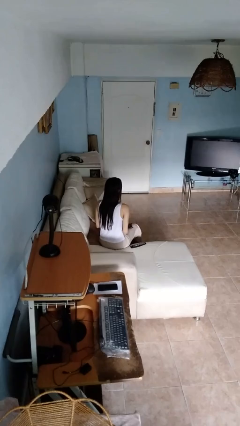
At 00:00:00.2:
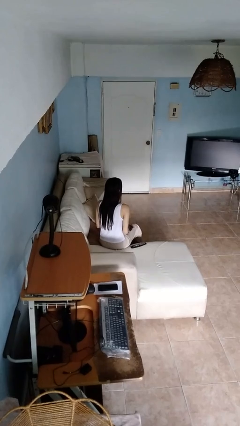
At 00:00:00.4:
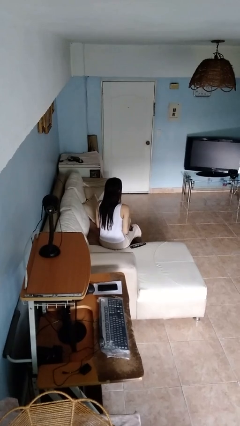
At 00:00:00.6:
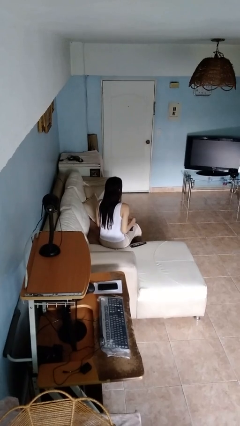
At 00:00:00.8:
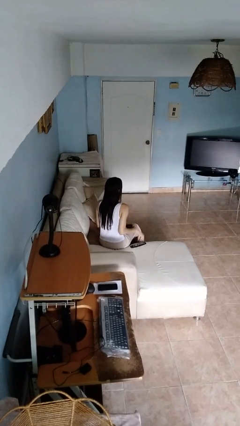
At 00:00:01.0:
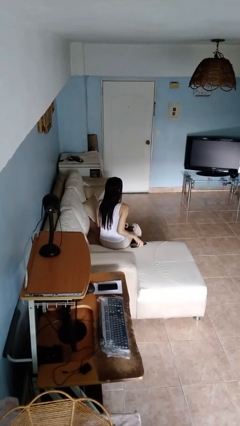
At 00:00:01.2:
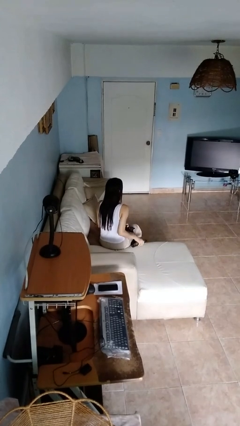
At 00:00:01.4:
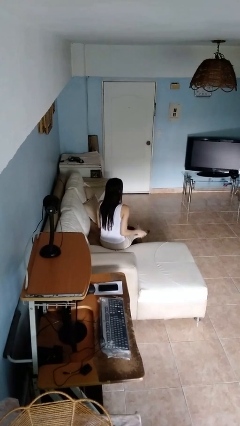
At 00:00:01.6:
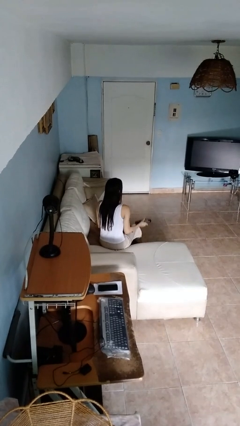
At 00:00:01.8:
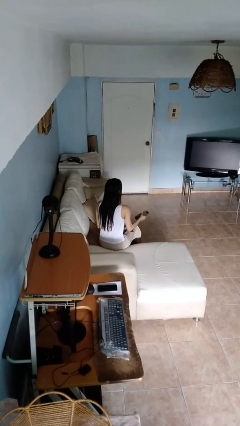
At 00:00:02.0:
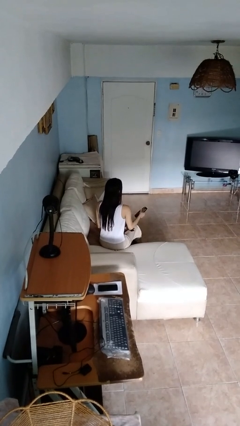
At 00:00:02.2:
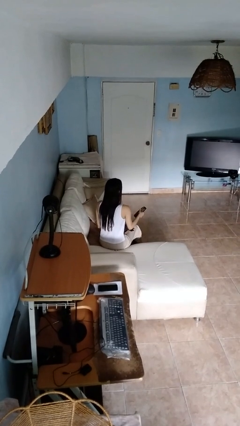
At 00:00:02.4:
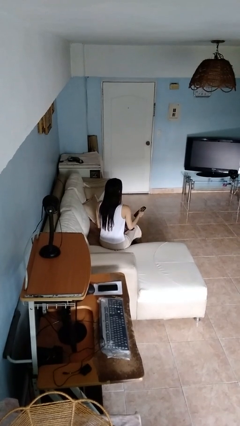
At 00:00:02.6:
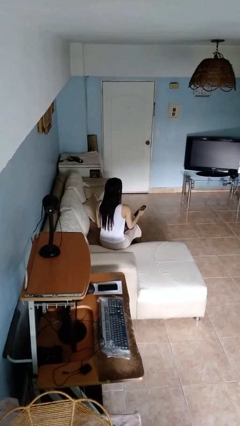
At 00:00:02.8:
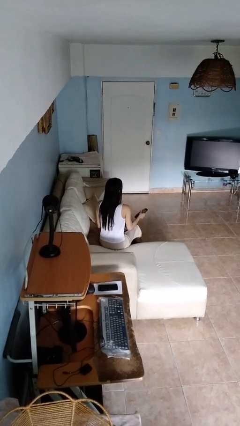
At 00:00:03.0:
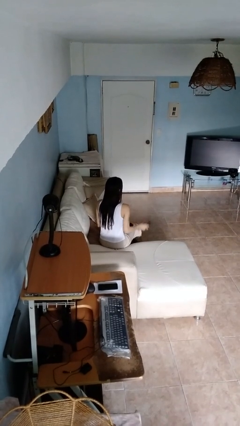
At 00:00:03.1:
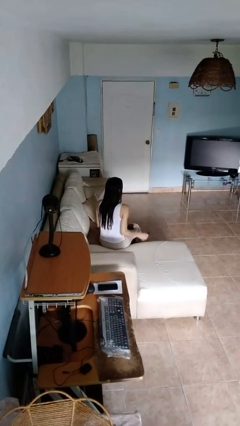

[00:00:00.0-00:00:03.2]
person uses television remote

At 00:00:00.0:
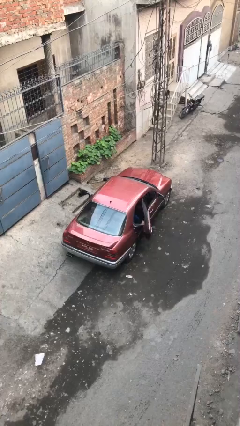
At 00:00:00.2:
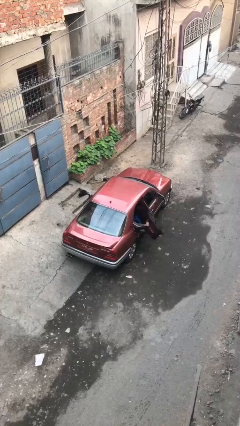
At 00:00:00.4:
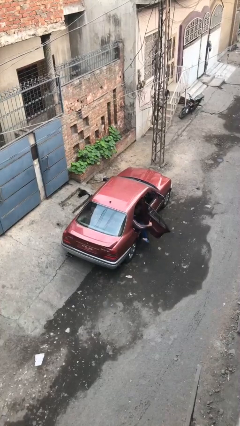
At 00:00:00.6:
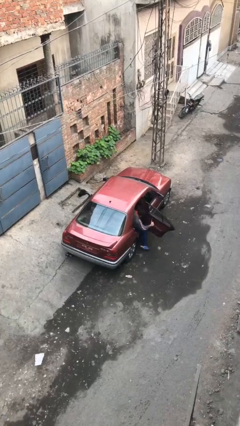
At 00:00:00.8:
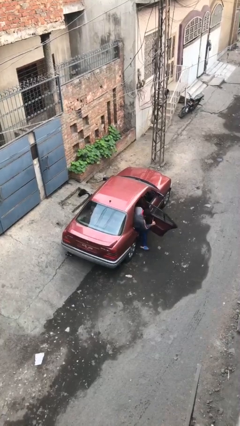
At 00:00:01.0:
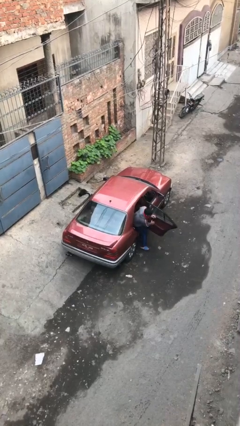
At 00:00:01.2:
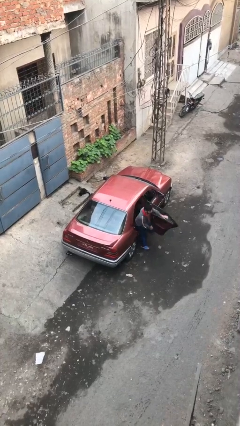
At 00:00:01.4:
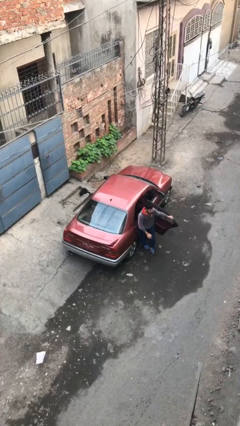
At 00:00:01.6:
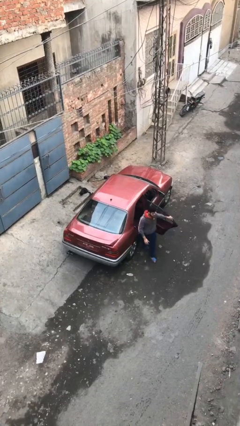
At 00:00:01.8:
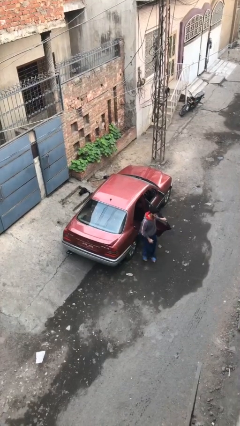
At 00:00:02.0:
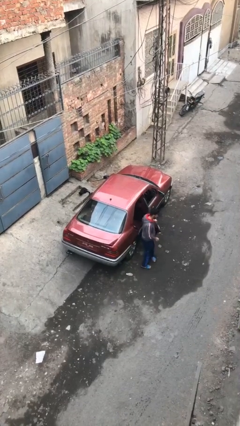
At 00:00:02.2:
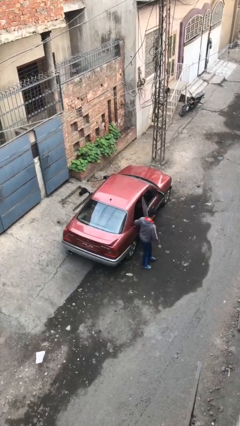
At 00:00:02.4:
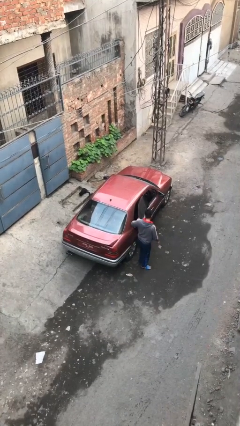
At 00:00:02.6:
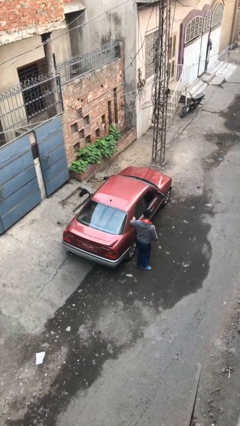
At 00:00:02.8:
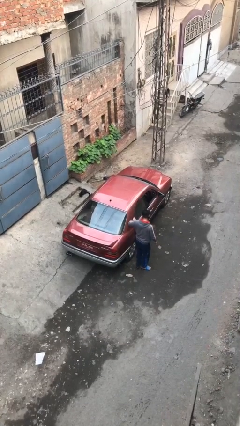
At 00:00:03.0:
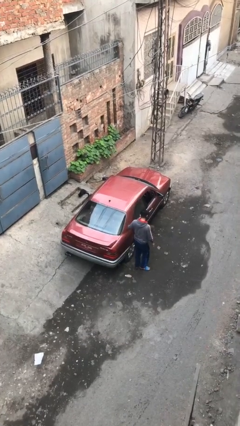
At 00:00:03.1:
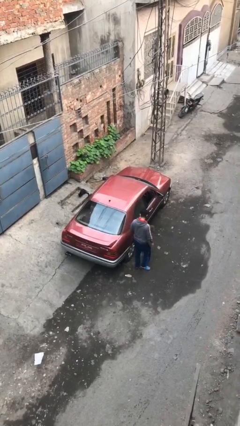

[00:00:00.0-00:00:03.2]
car drops off person

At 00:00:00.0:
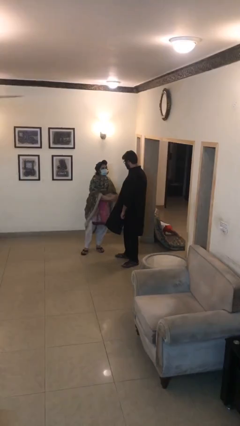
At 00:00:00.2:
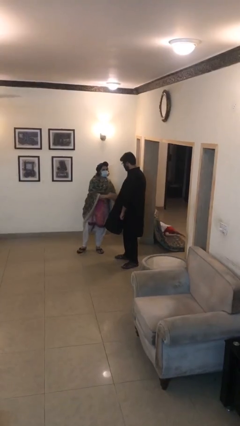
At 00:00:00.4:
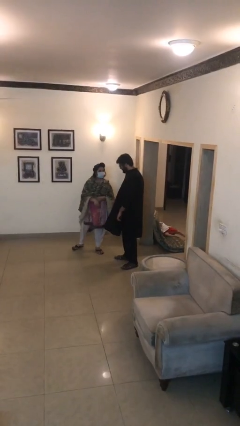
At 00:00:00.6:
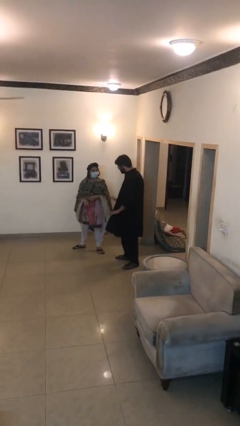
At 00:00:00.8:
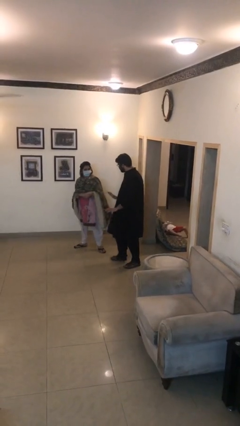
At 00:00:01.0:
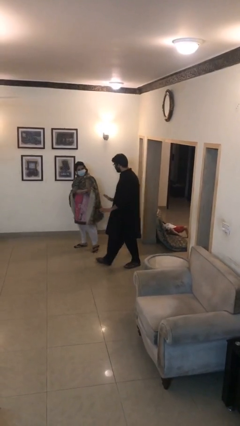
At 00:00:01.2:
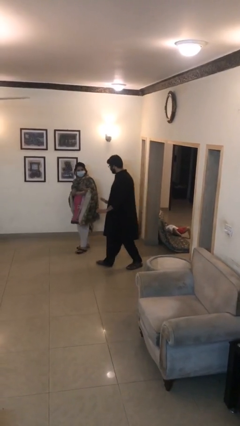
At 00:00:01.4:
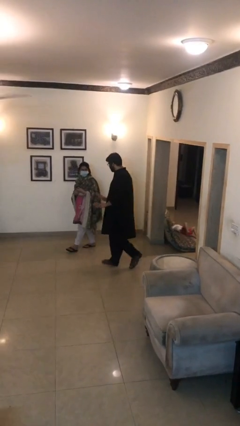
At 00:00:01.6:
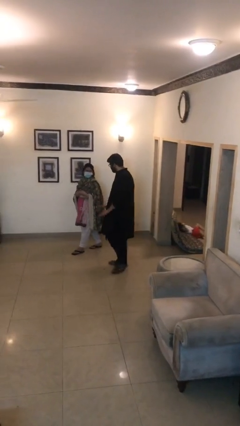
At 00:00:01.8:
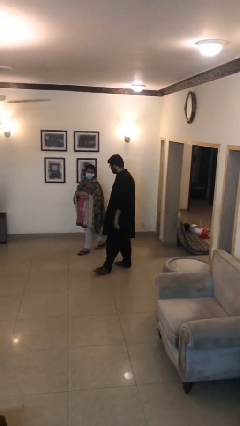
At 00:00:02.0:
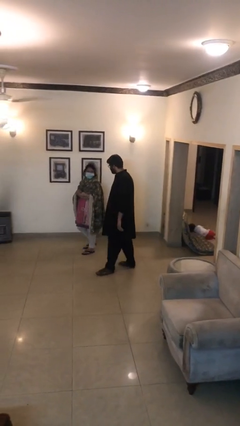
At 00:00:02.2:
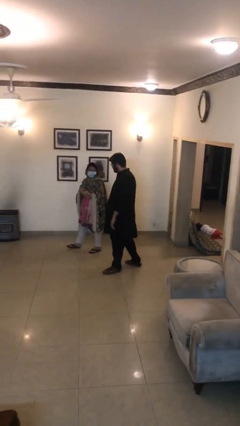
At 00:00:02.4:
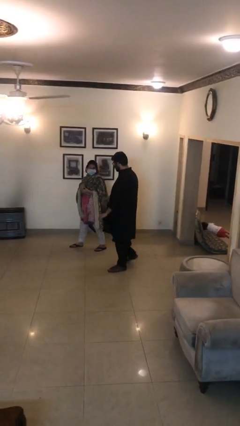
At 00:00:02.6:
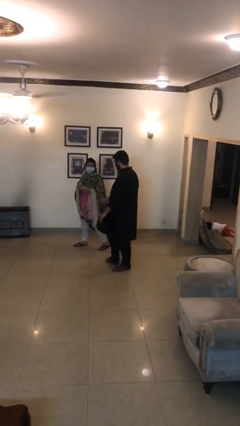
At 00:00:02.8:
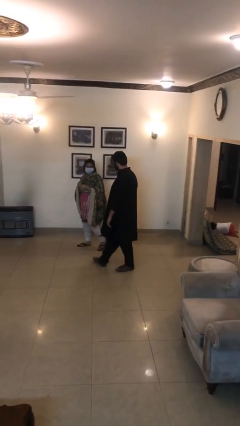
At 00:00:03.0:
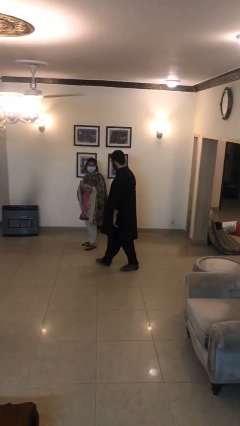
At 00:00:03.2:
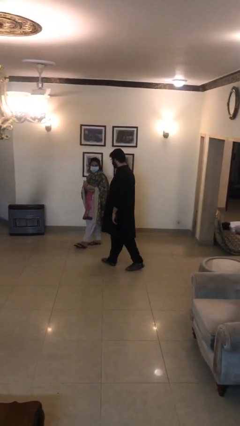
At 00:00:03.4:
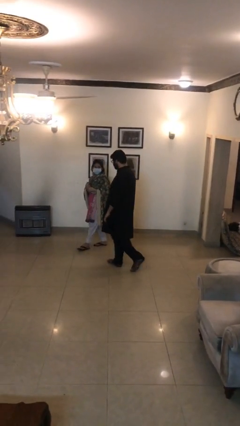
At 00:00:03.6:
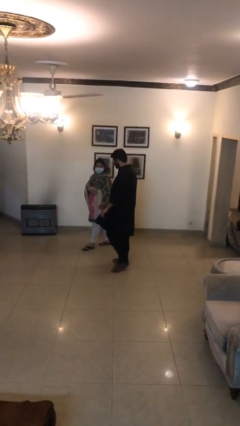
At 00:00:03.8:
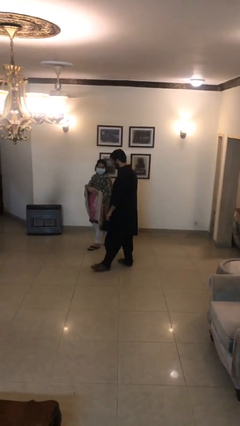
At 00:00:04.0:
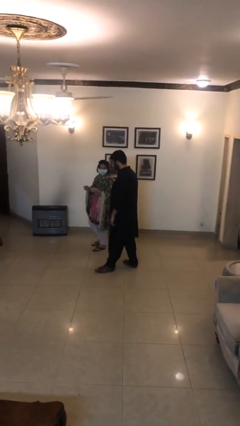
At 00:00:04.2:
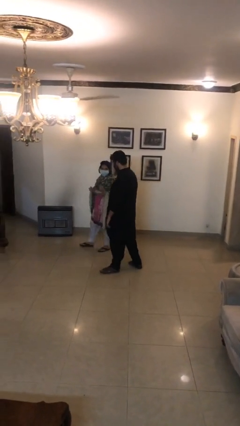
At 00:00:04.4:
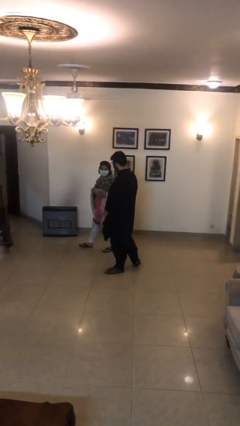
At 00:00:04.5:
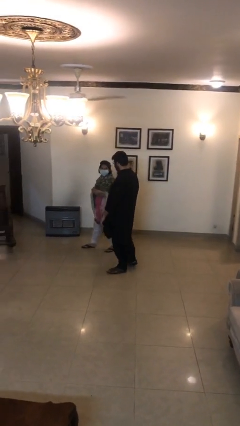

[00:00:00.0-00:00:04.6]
person talks to person

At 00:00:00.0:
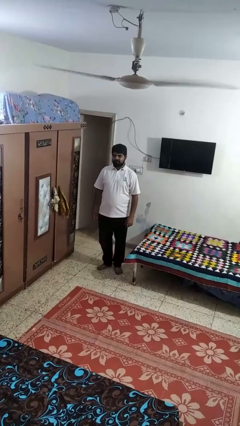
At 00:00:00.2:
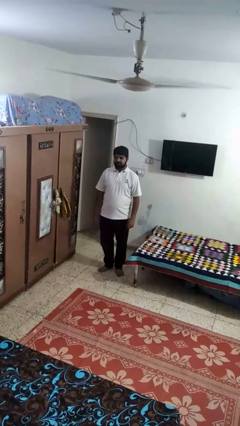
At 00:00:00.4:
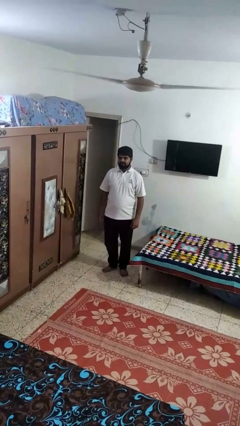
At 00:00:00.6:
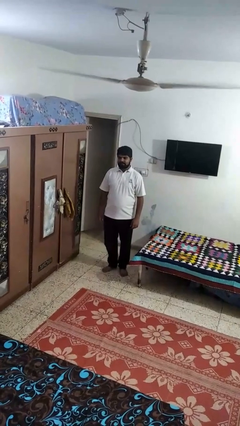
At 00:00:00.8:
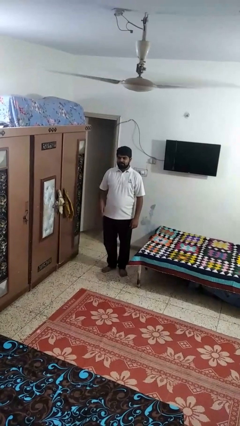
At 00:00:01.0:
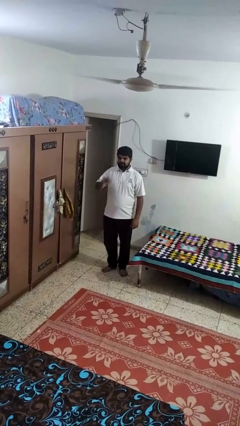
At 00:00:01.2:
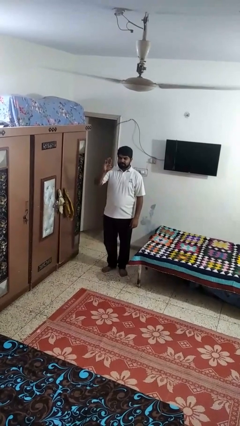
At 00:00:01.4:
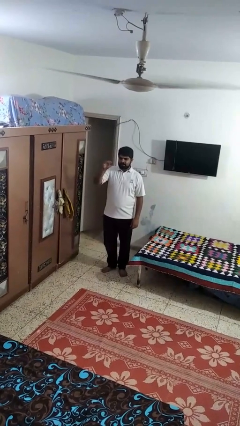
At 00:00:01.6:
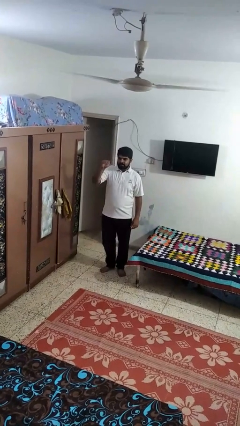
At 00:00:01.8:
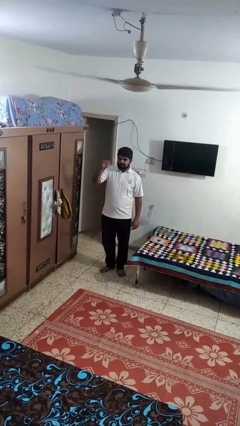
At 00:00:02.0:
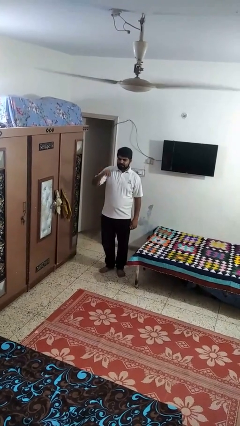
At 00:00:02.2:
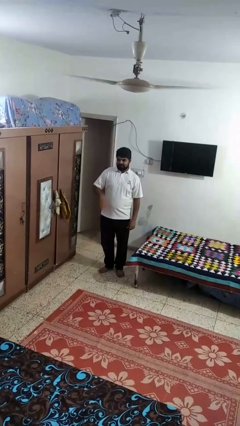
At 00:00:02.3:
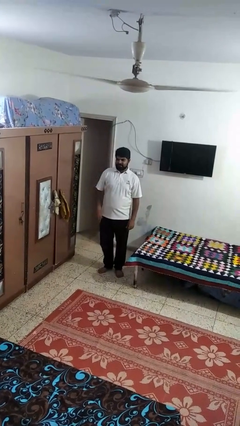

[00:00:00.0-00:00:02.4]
person gestures come here

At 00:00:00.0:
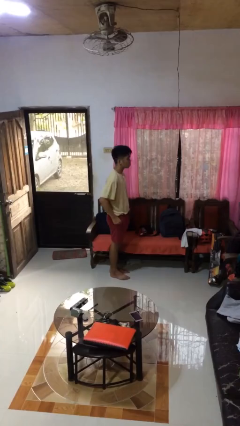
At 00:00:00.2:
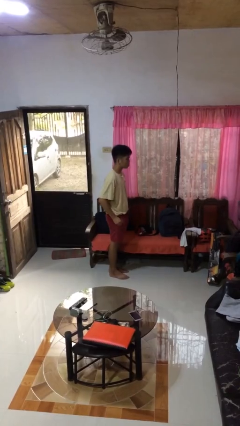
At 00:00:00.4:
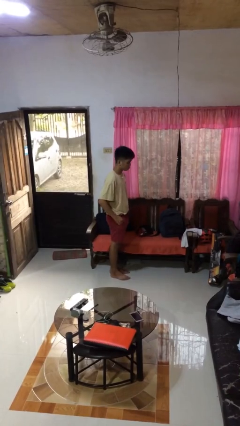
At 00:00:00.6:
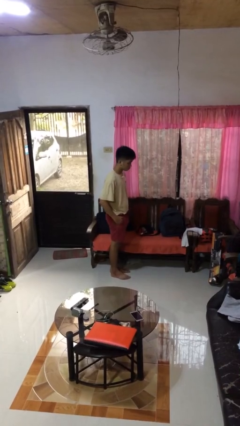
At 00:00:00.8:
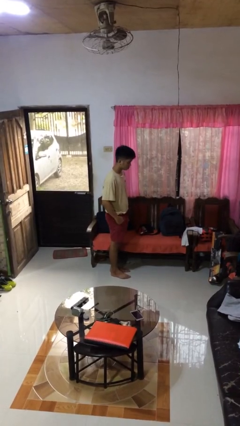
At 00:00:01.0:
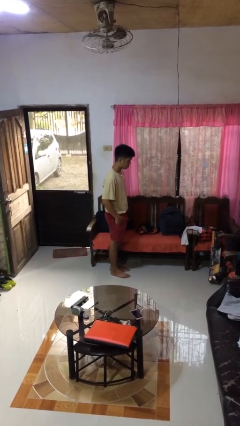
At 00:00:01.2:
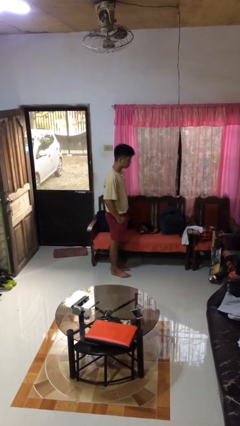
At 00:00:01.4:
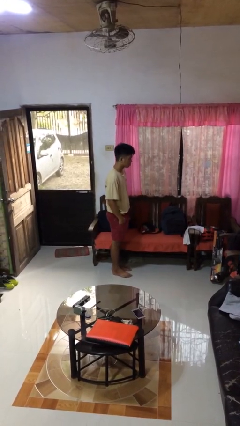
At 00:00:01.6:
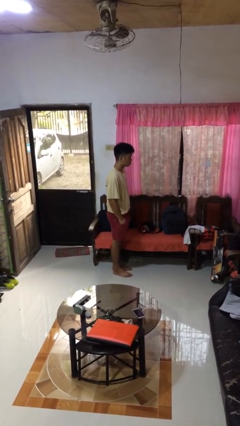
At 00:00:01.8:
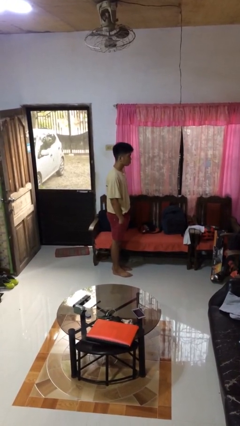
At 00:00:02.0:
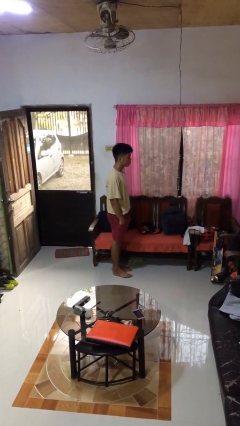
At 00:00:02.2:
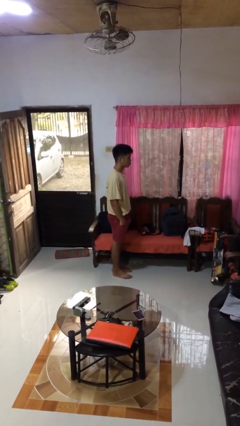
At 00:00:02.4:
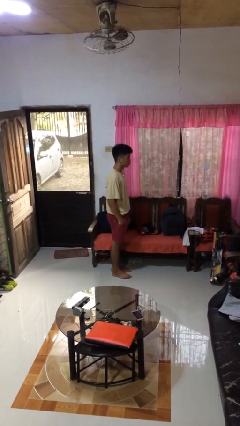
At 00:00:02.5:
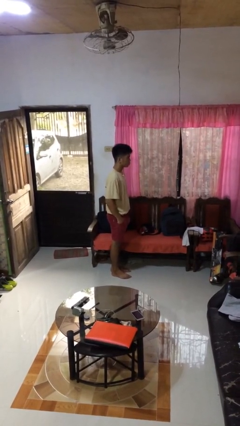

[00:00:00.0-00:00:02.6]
person puts hands in back pockets

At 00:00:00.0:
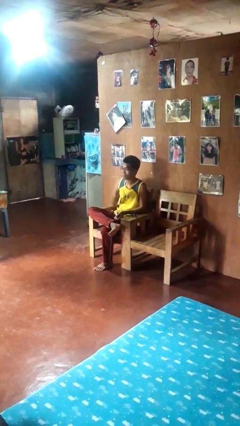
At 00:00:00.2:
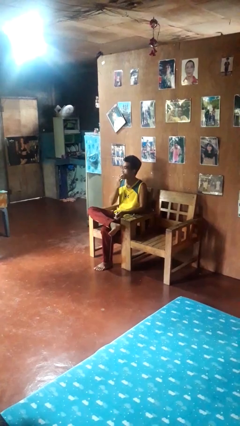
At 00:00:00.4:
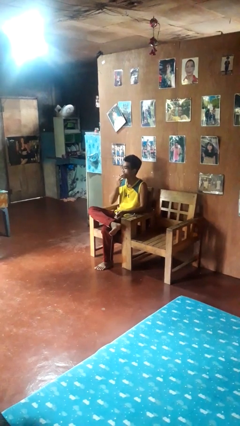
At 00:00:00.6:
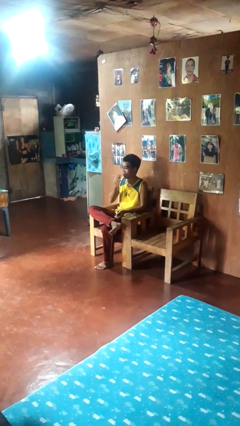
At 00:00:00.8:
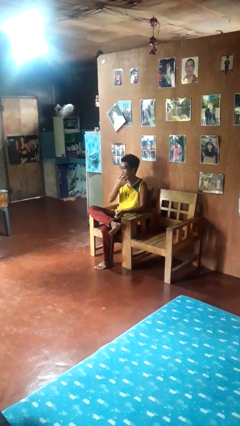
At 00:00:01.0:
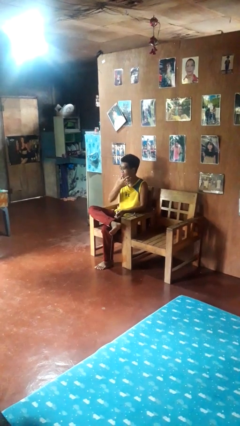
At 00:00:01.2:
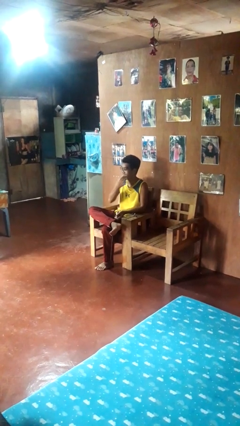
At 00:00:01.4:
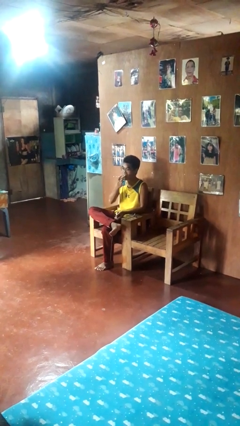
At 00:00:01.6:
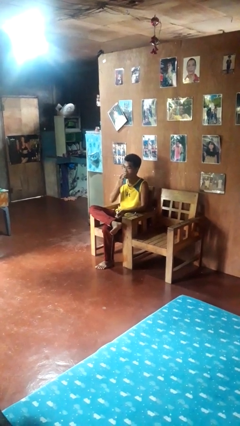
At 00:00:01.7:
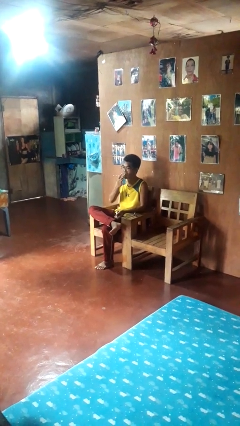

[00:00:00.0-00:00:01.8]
person licks fingers
